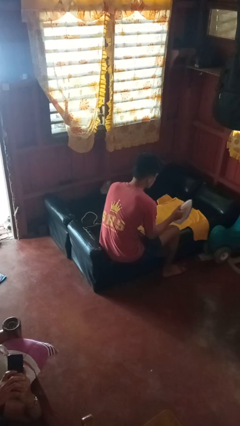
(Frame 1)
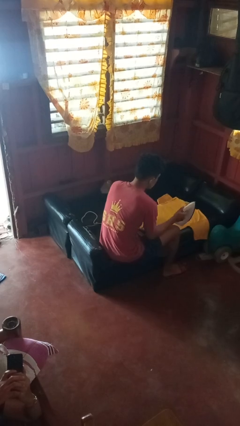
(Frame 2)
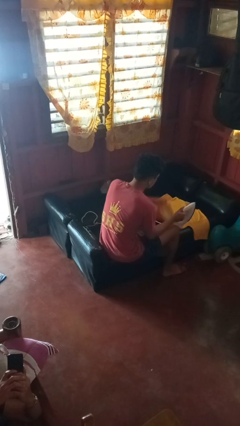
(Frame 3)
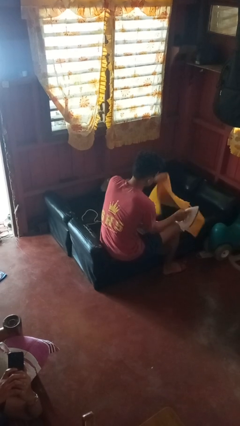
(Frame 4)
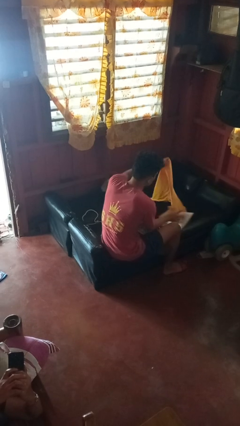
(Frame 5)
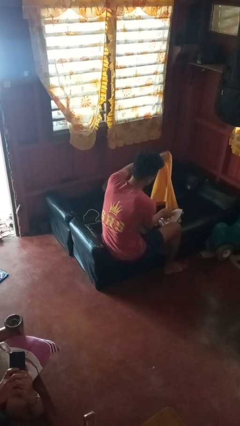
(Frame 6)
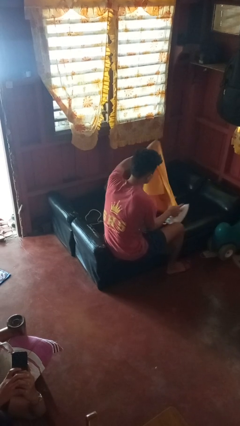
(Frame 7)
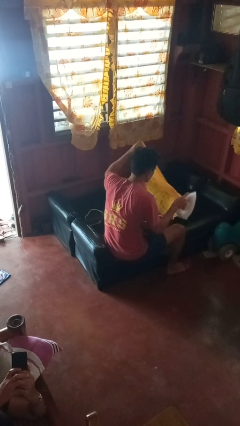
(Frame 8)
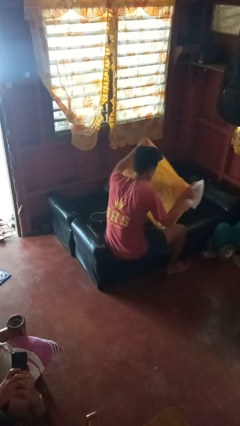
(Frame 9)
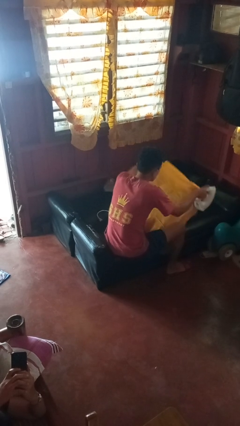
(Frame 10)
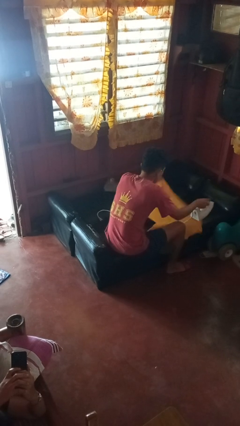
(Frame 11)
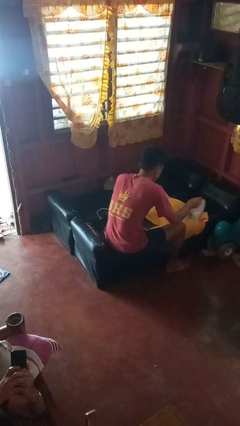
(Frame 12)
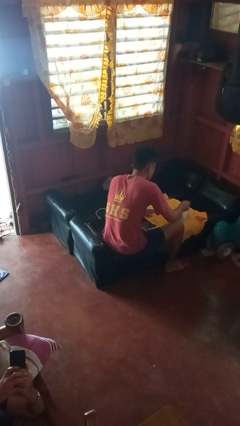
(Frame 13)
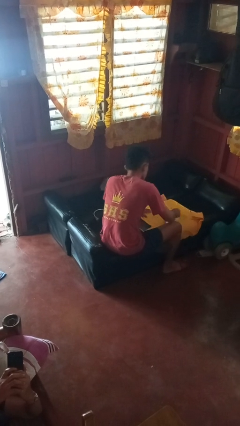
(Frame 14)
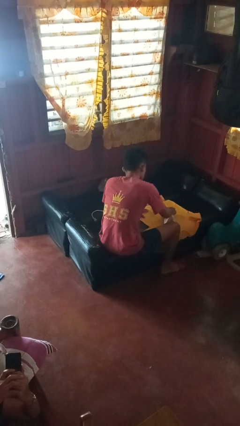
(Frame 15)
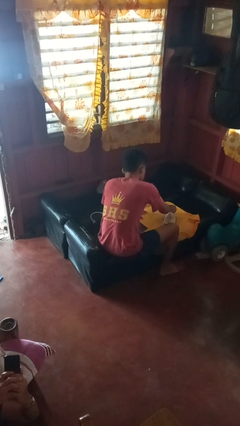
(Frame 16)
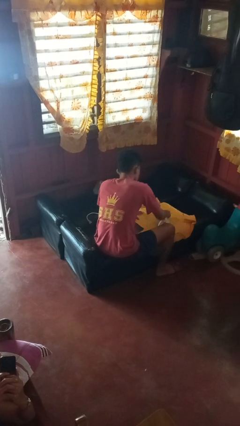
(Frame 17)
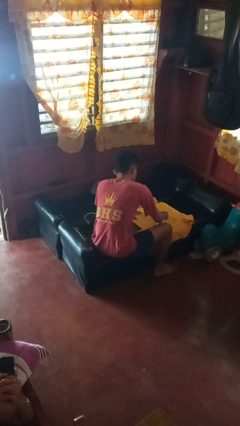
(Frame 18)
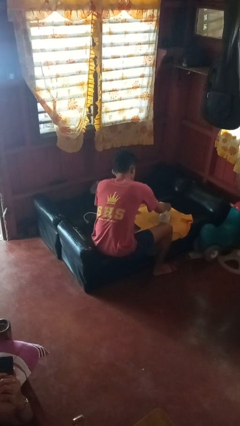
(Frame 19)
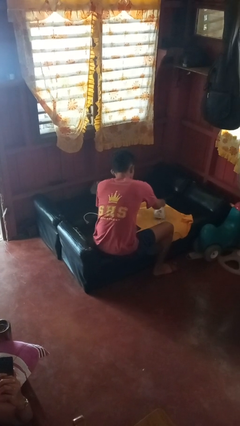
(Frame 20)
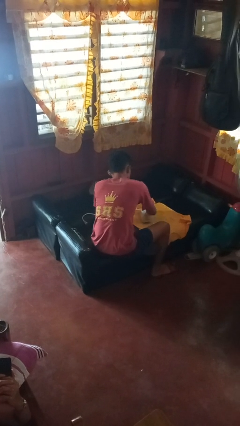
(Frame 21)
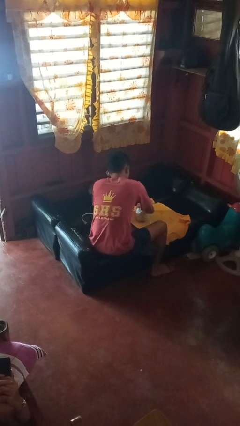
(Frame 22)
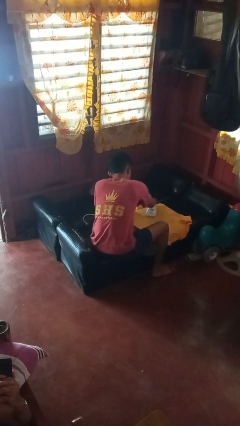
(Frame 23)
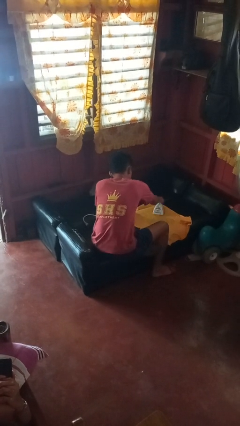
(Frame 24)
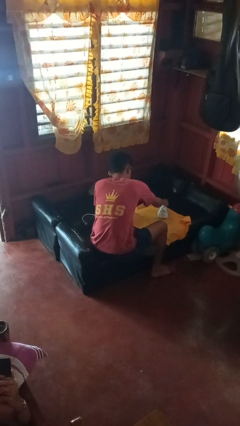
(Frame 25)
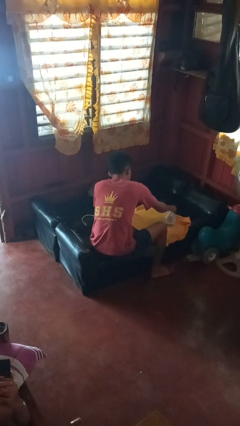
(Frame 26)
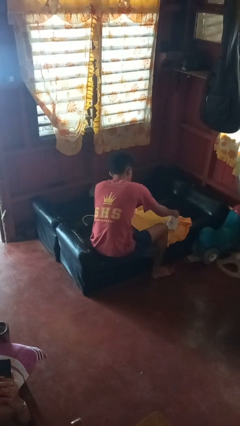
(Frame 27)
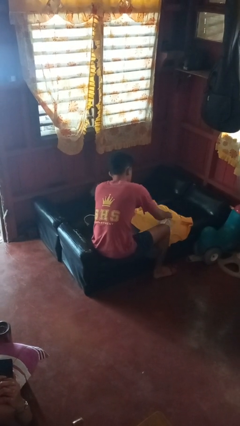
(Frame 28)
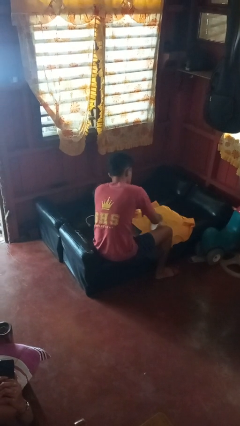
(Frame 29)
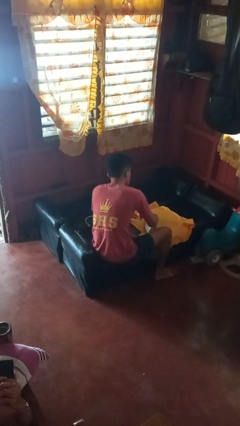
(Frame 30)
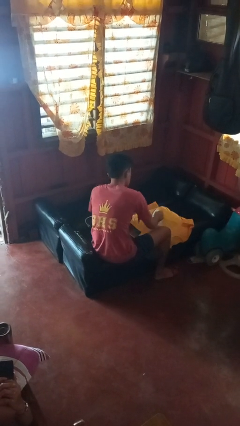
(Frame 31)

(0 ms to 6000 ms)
person irons clothes

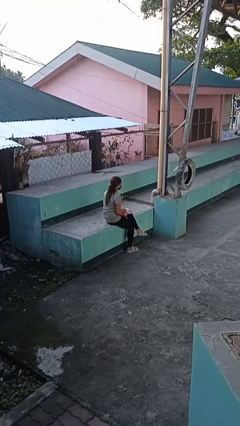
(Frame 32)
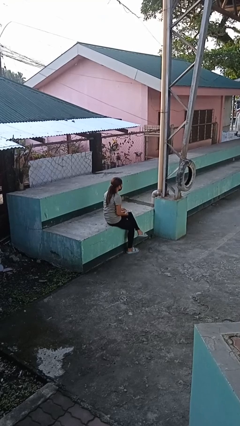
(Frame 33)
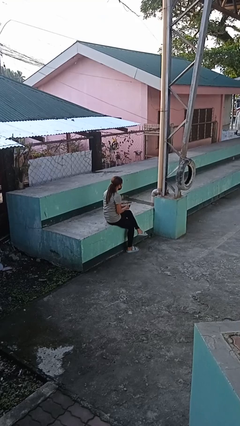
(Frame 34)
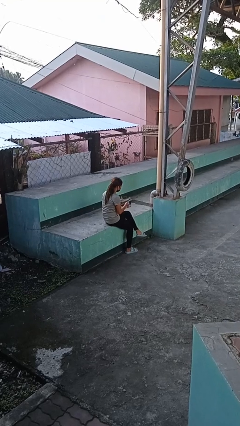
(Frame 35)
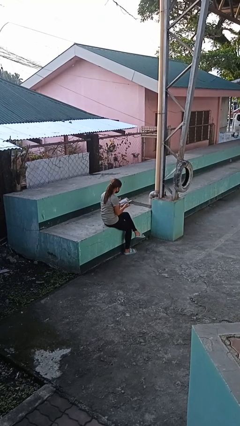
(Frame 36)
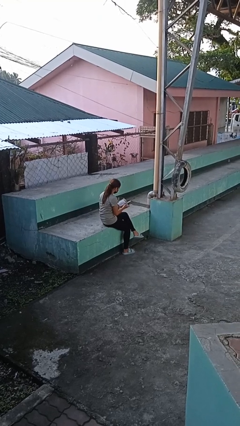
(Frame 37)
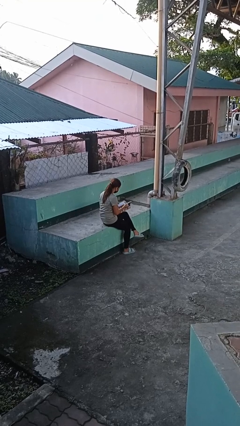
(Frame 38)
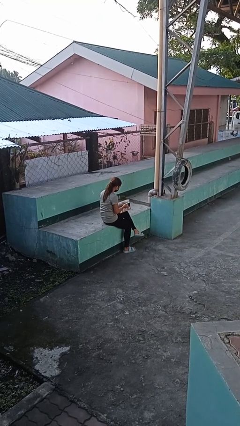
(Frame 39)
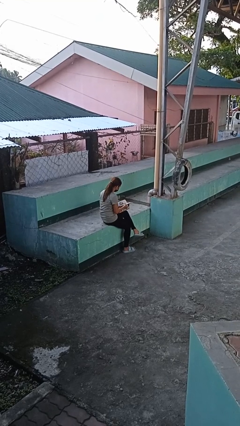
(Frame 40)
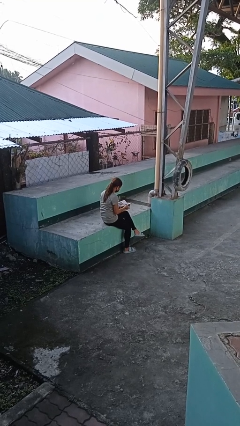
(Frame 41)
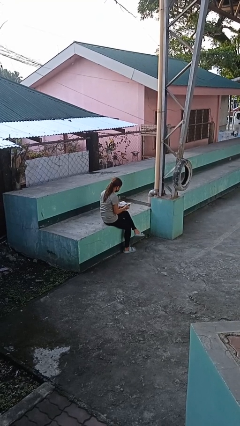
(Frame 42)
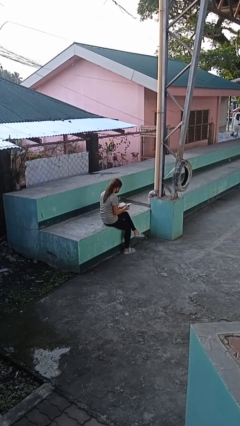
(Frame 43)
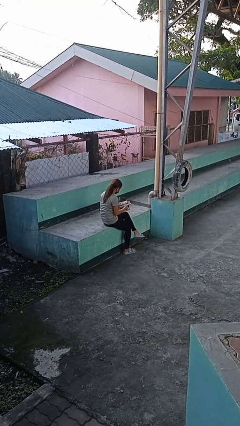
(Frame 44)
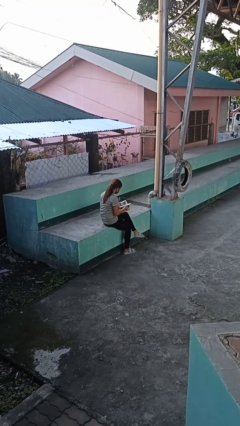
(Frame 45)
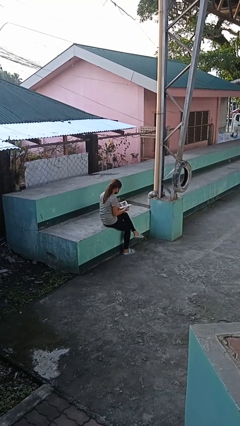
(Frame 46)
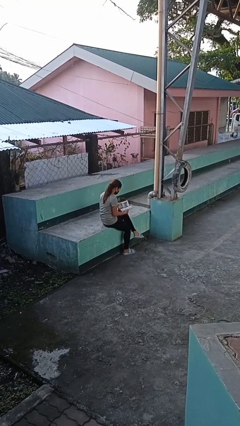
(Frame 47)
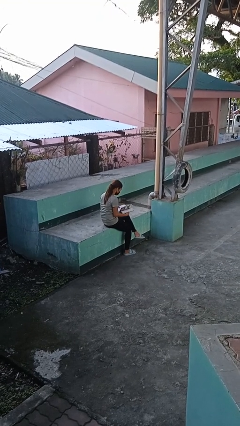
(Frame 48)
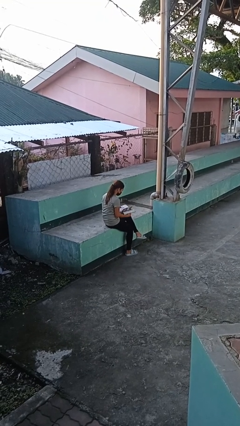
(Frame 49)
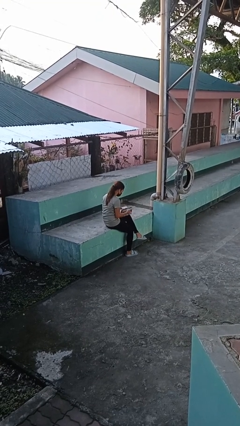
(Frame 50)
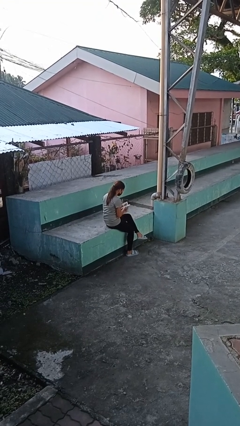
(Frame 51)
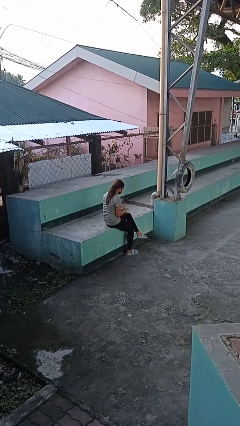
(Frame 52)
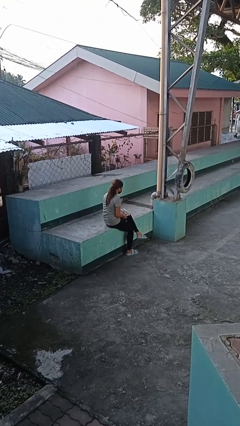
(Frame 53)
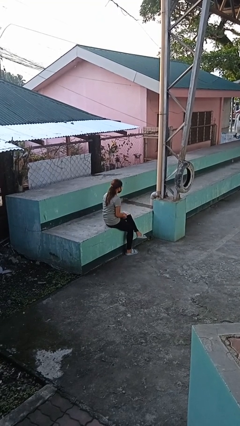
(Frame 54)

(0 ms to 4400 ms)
person reads magazine

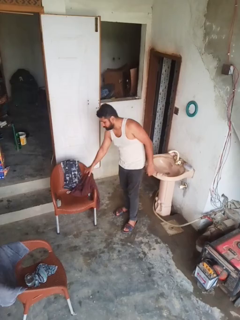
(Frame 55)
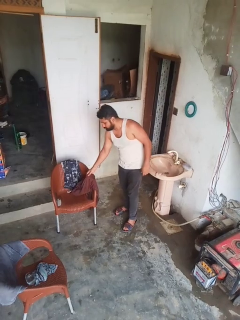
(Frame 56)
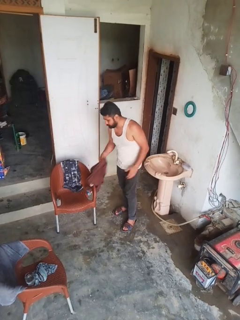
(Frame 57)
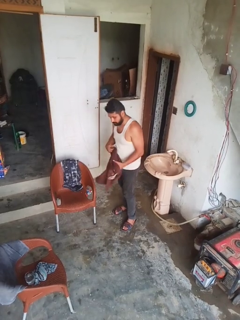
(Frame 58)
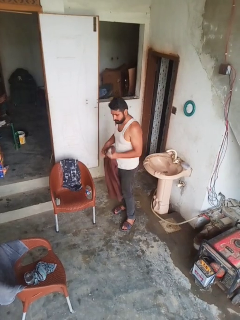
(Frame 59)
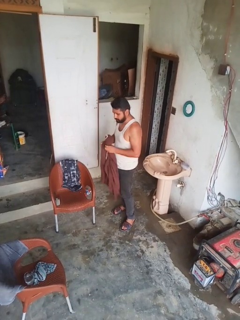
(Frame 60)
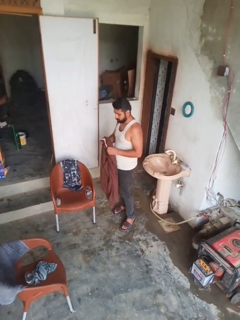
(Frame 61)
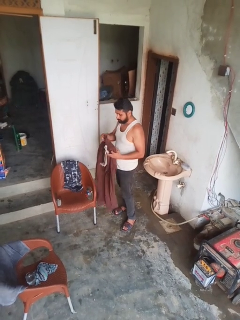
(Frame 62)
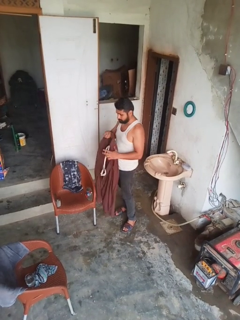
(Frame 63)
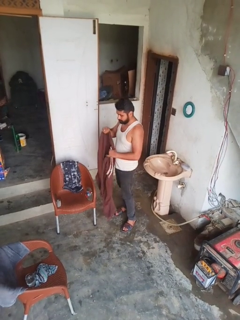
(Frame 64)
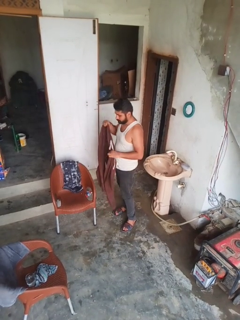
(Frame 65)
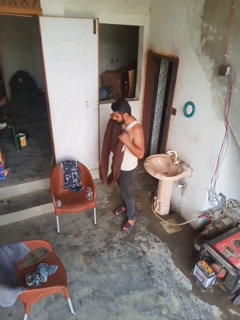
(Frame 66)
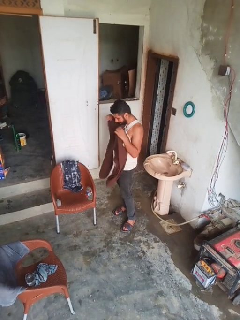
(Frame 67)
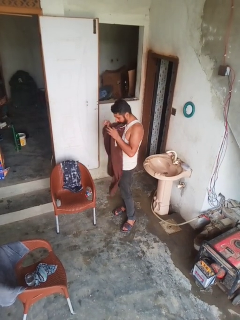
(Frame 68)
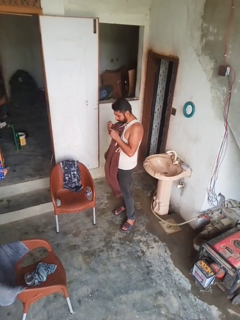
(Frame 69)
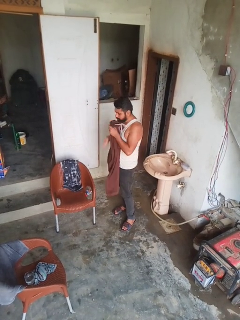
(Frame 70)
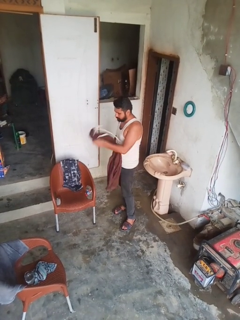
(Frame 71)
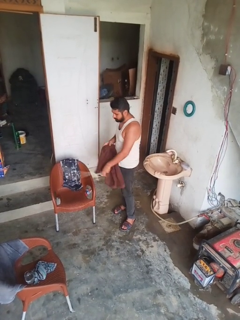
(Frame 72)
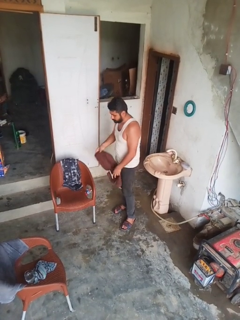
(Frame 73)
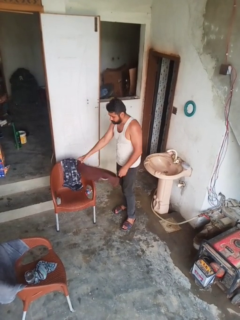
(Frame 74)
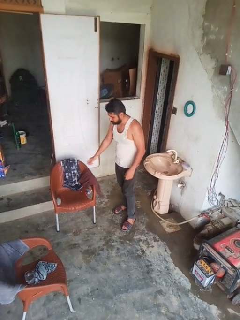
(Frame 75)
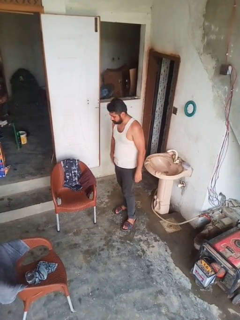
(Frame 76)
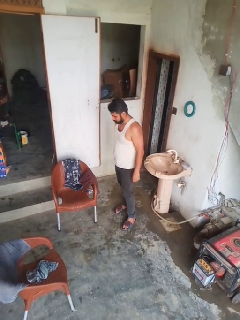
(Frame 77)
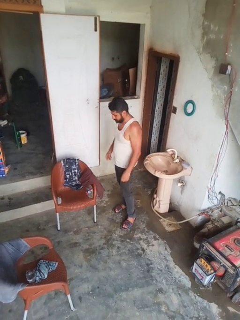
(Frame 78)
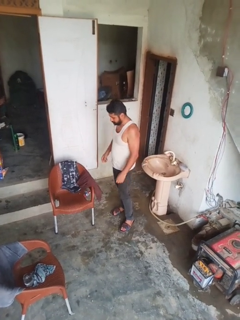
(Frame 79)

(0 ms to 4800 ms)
person folds pants

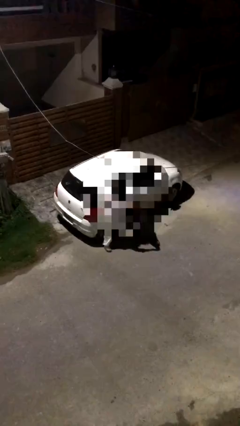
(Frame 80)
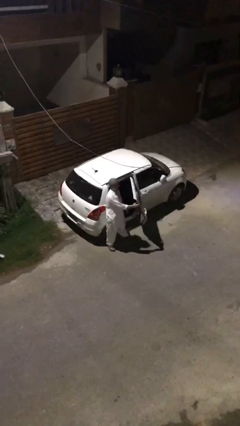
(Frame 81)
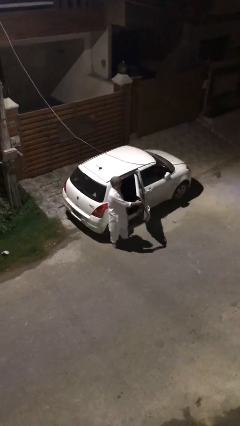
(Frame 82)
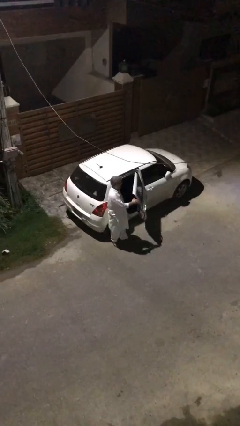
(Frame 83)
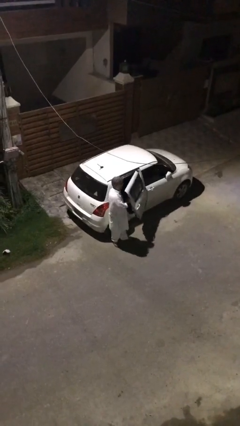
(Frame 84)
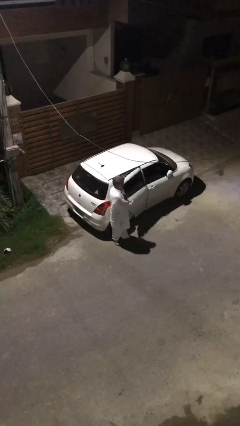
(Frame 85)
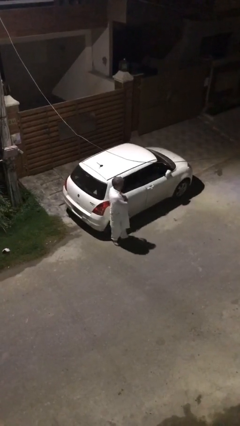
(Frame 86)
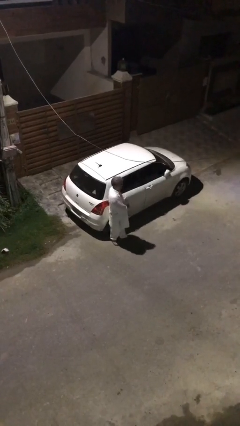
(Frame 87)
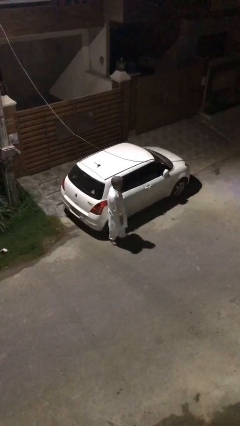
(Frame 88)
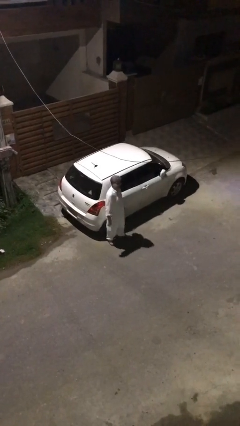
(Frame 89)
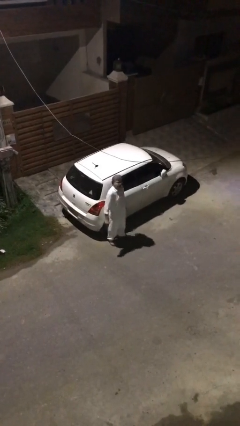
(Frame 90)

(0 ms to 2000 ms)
person closes car door

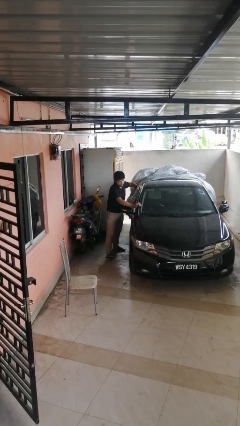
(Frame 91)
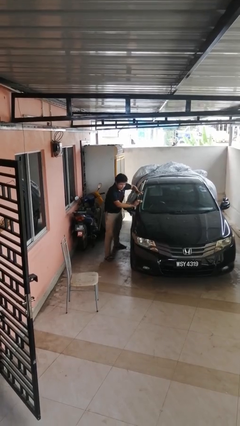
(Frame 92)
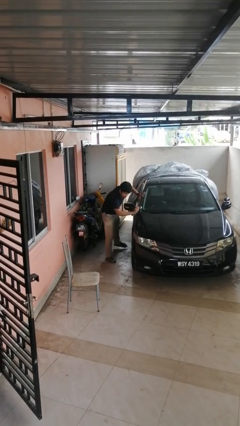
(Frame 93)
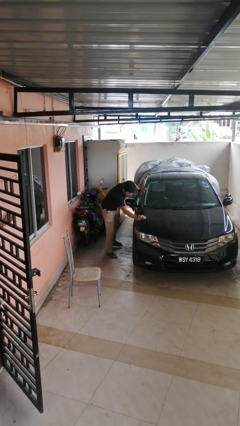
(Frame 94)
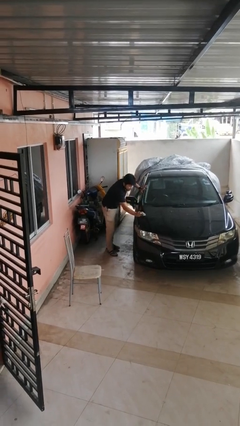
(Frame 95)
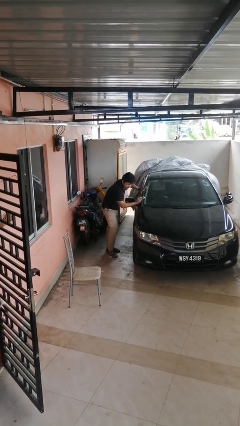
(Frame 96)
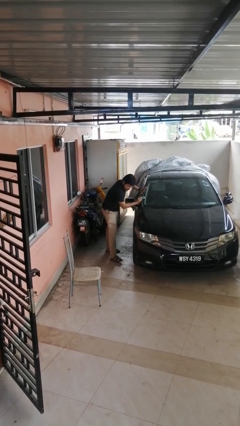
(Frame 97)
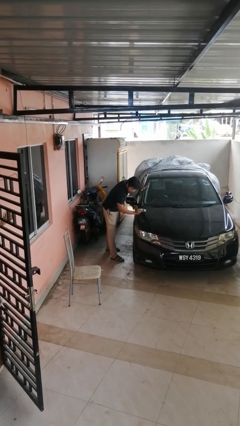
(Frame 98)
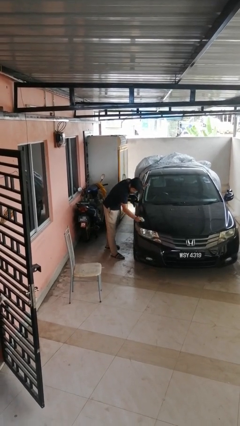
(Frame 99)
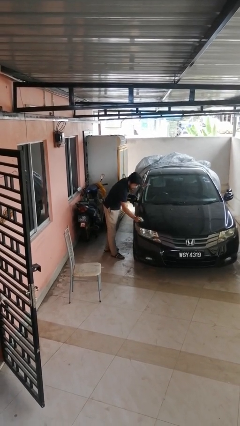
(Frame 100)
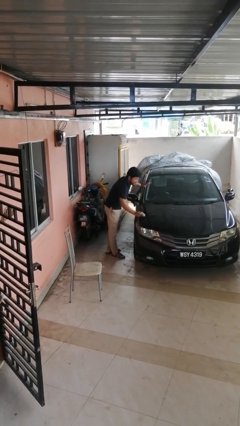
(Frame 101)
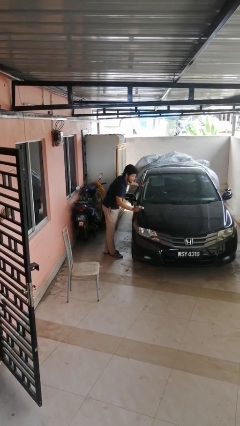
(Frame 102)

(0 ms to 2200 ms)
person polishes car with rag
